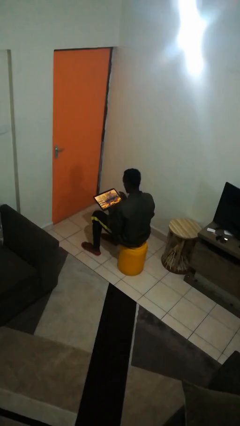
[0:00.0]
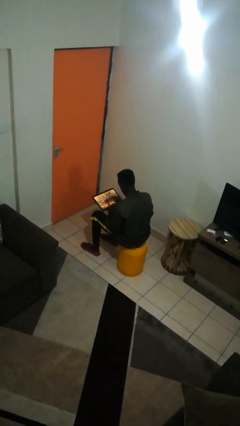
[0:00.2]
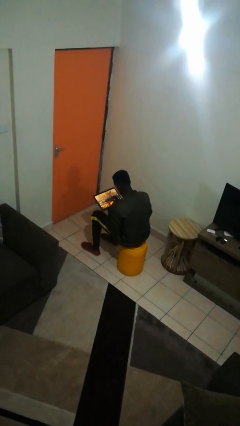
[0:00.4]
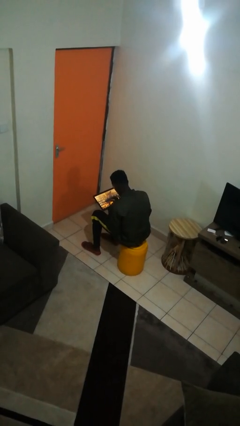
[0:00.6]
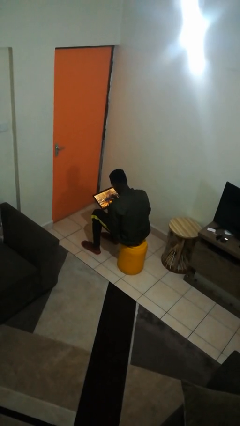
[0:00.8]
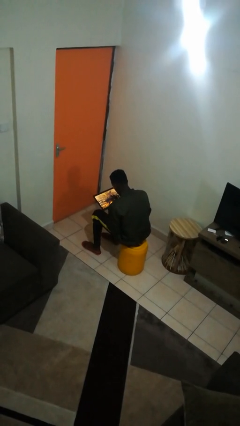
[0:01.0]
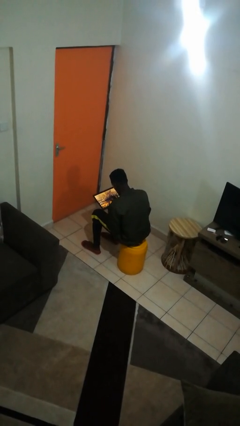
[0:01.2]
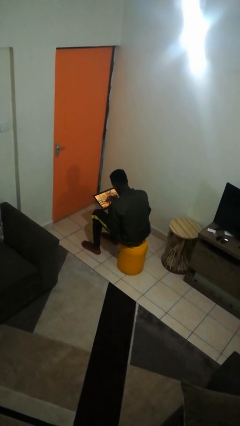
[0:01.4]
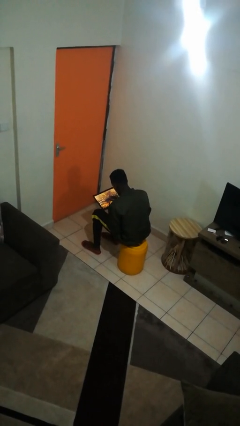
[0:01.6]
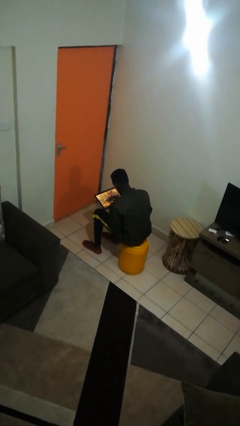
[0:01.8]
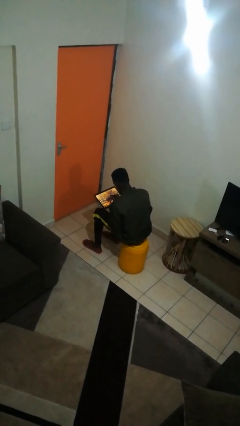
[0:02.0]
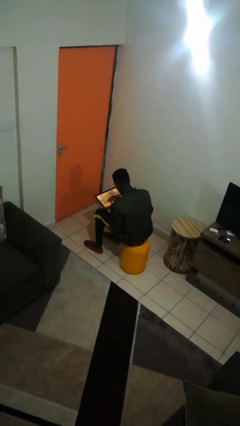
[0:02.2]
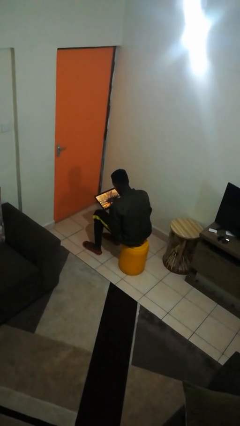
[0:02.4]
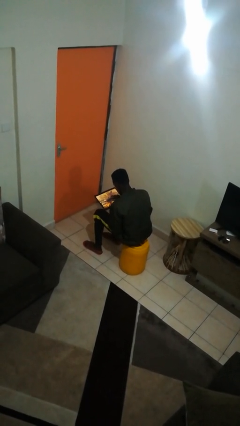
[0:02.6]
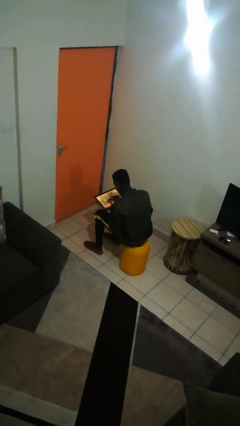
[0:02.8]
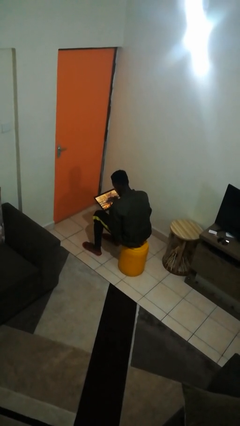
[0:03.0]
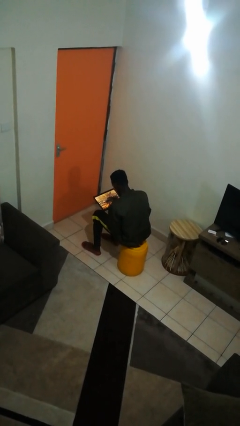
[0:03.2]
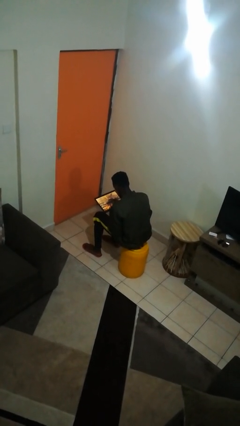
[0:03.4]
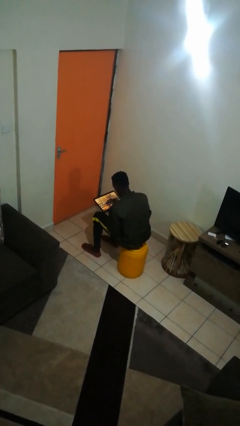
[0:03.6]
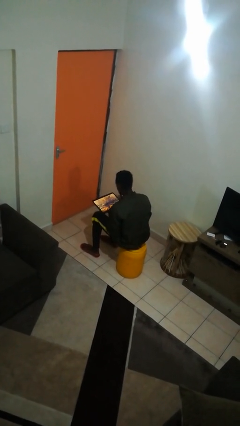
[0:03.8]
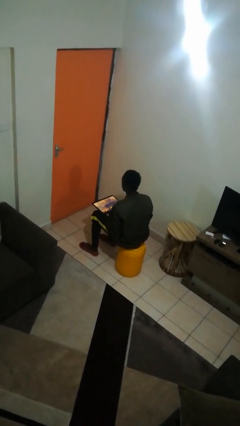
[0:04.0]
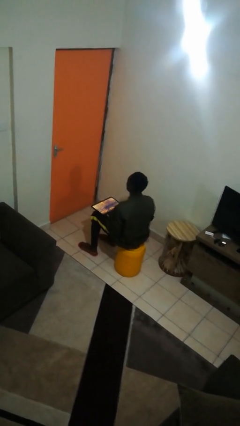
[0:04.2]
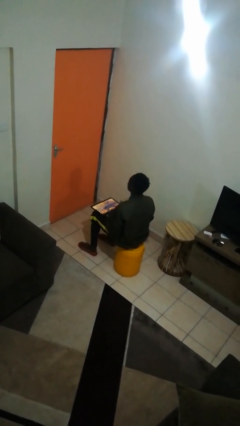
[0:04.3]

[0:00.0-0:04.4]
person interacts with tablet

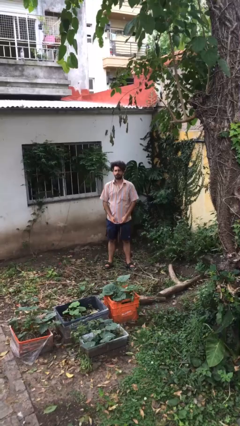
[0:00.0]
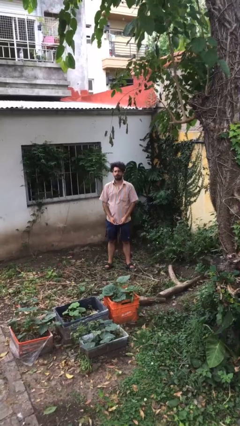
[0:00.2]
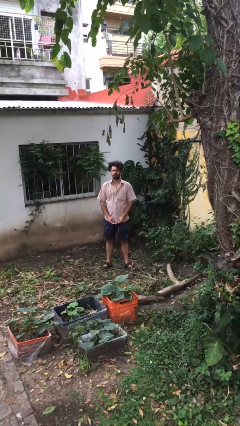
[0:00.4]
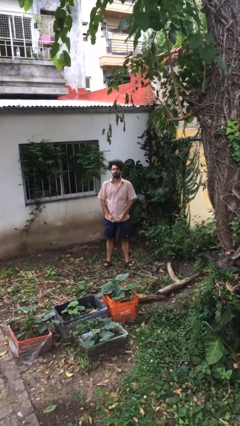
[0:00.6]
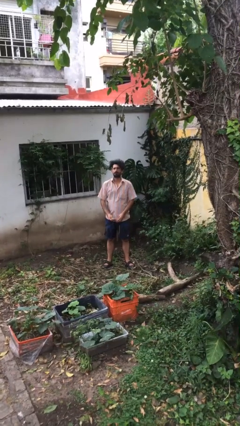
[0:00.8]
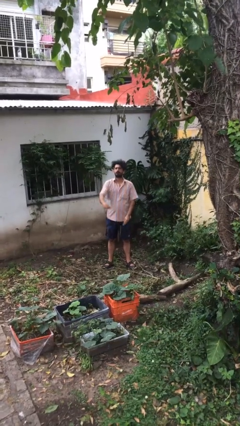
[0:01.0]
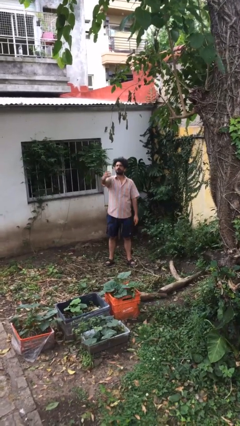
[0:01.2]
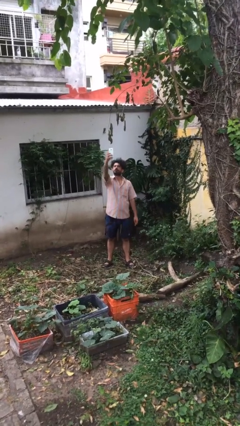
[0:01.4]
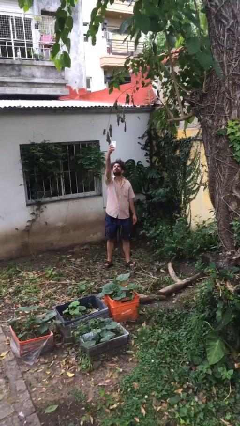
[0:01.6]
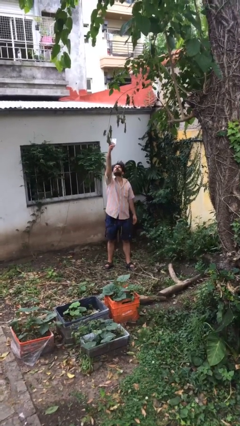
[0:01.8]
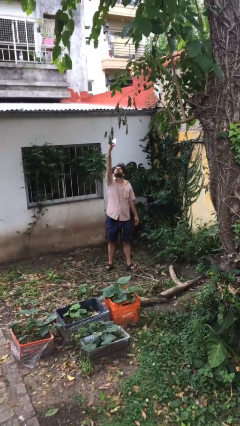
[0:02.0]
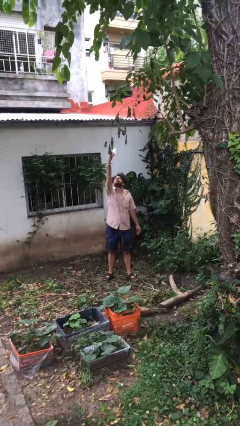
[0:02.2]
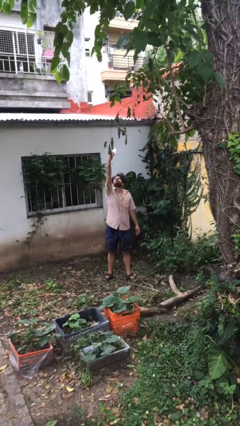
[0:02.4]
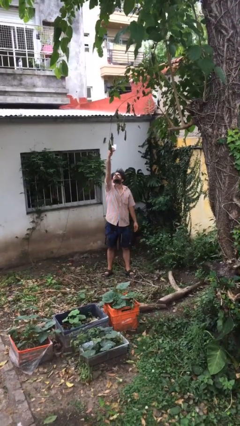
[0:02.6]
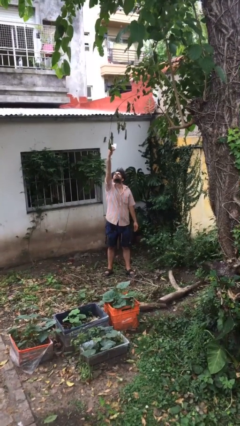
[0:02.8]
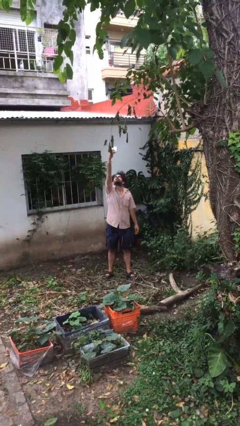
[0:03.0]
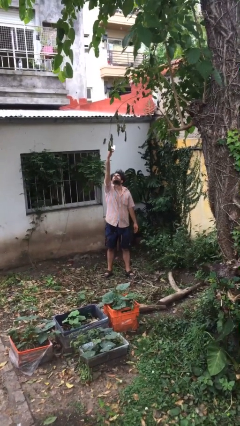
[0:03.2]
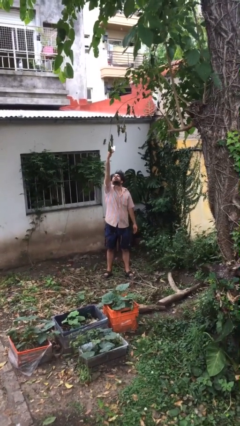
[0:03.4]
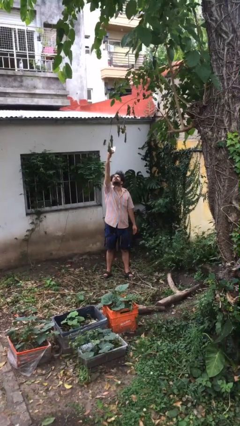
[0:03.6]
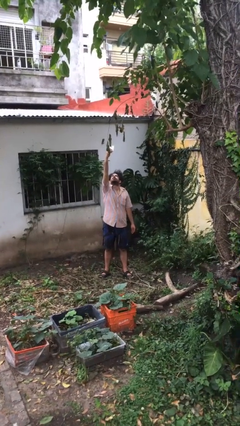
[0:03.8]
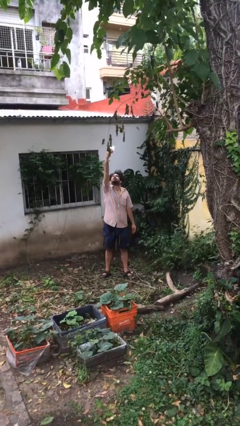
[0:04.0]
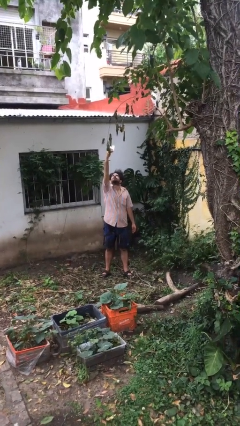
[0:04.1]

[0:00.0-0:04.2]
person takes selfie

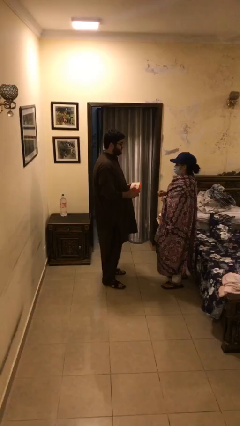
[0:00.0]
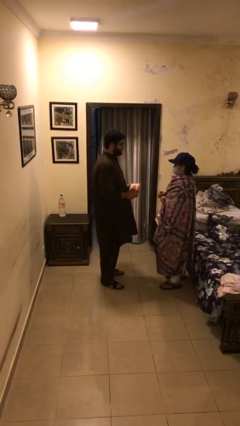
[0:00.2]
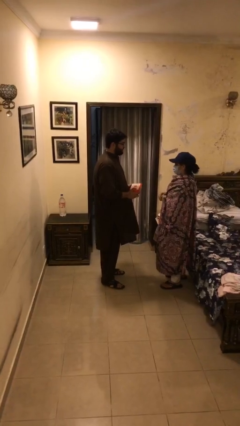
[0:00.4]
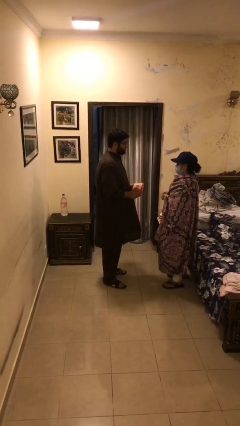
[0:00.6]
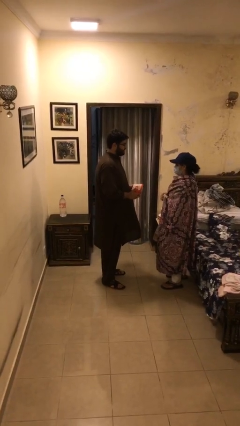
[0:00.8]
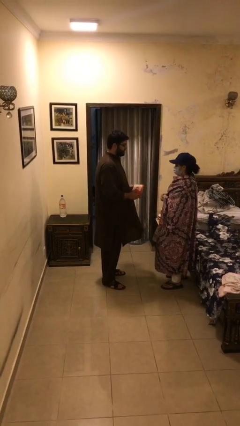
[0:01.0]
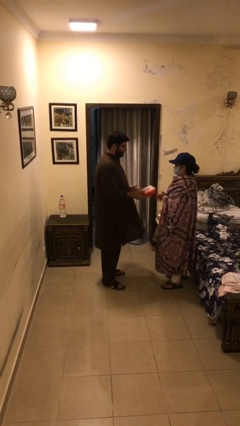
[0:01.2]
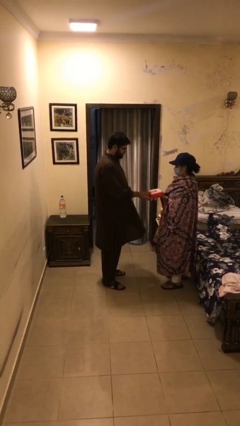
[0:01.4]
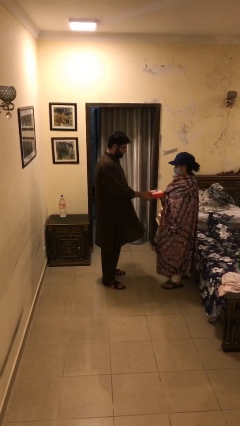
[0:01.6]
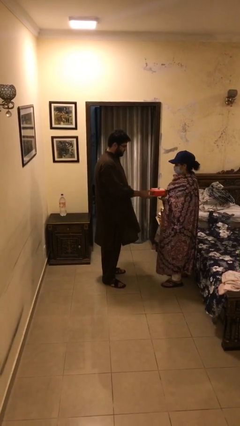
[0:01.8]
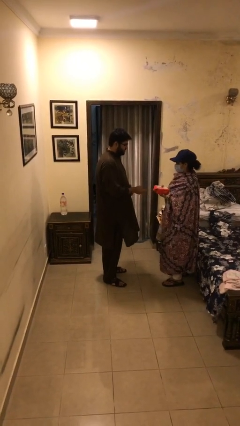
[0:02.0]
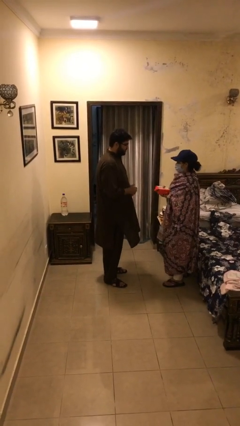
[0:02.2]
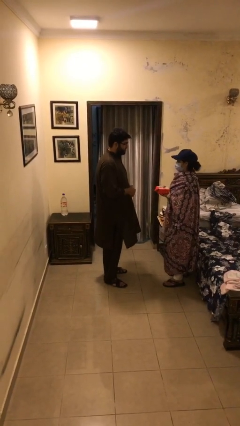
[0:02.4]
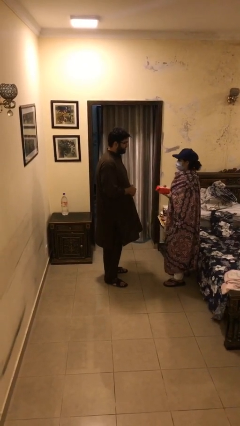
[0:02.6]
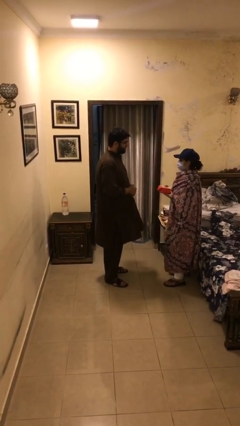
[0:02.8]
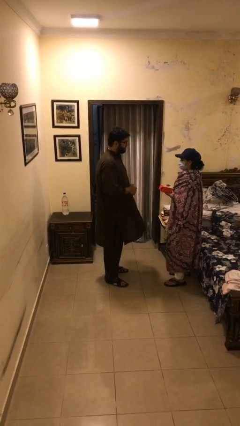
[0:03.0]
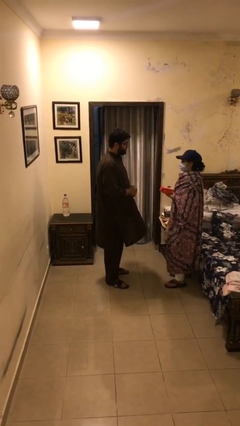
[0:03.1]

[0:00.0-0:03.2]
person transfers object to person

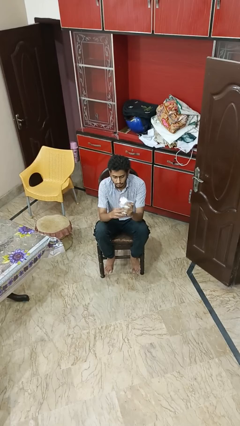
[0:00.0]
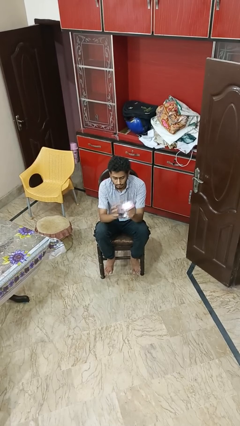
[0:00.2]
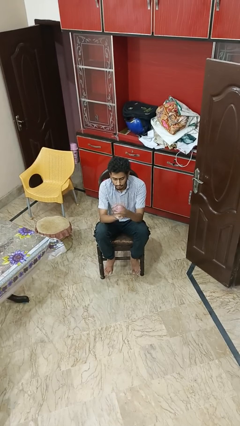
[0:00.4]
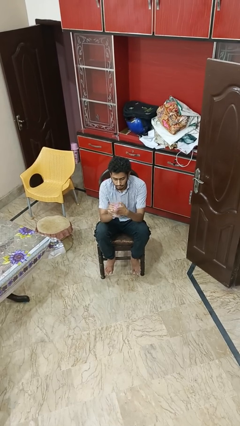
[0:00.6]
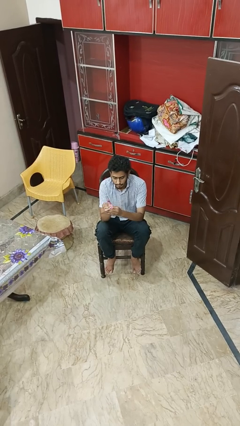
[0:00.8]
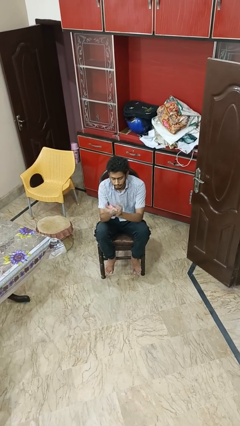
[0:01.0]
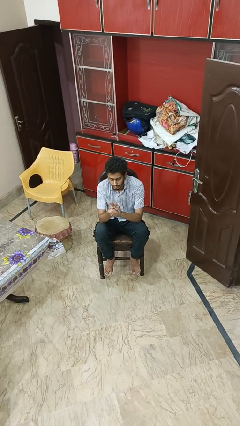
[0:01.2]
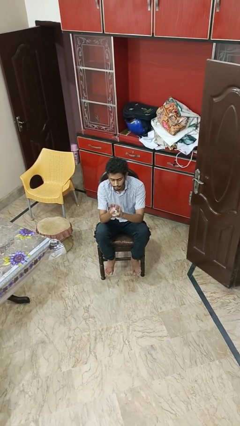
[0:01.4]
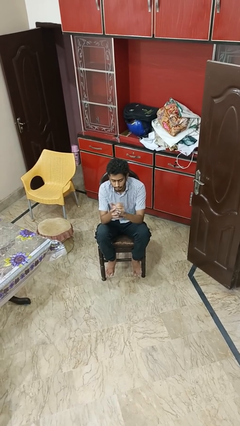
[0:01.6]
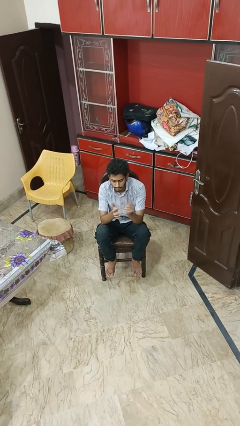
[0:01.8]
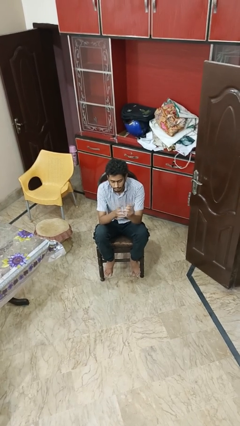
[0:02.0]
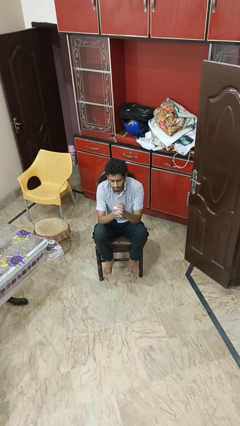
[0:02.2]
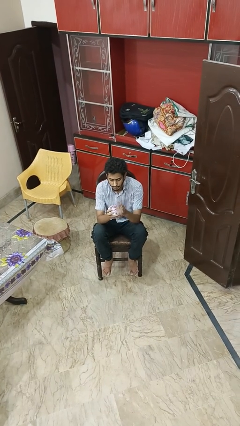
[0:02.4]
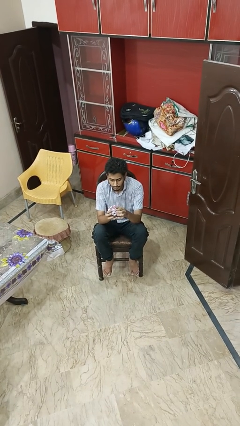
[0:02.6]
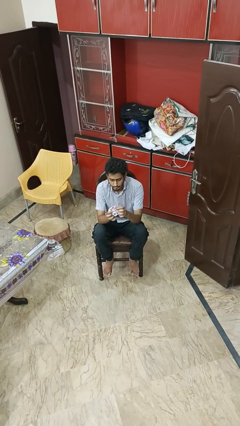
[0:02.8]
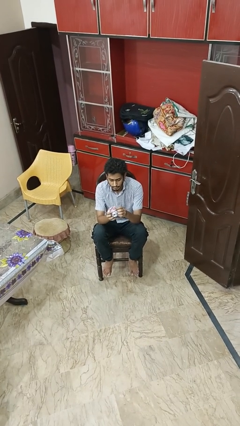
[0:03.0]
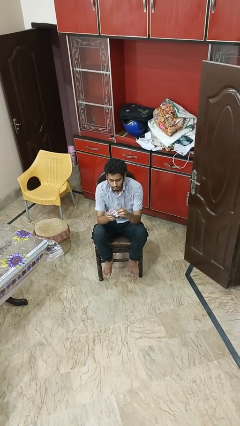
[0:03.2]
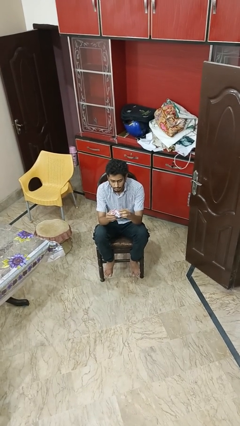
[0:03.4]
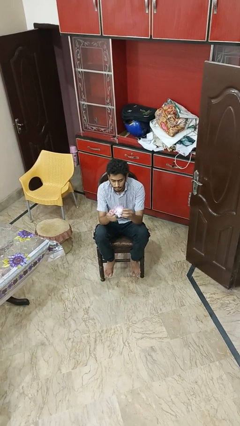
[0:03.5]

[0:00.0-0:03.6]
person crumples paper

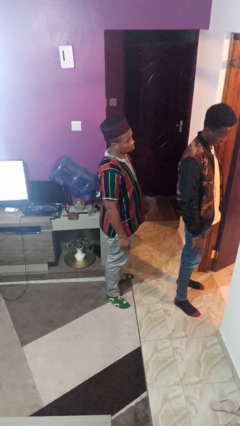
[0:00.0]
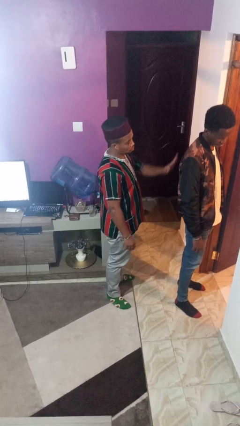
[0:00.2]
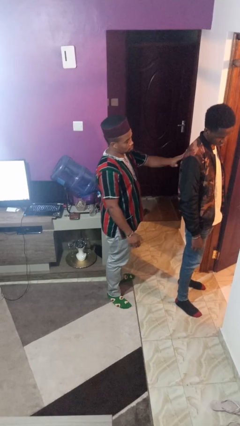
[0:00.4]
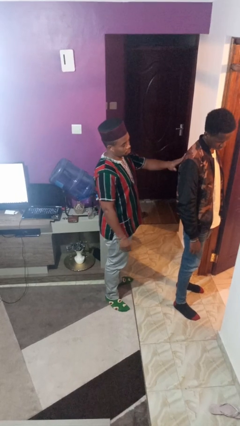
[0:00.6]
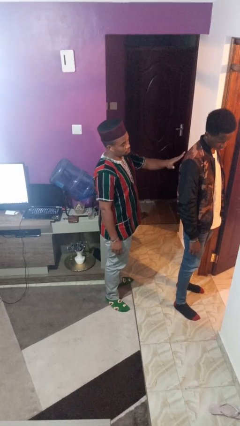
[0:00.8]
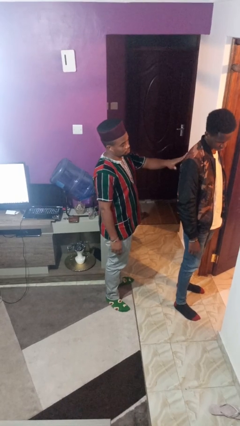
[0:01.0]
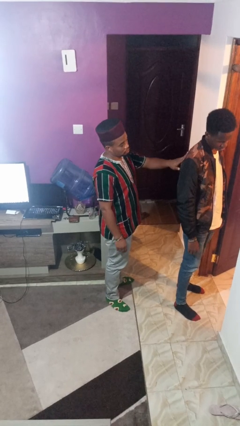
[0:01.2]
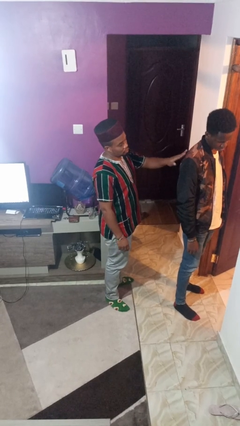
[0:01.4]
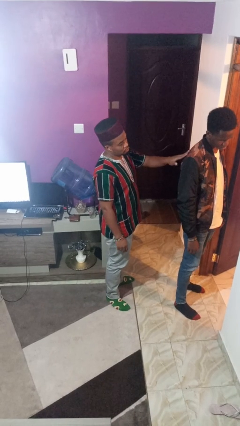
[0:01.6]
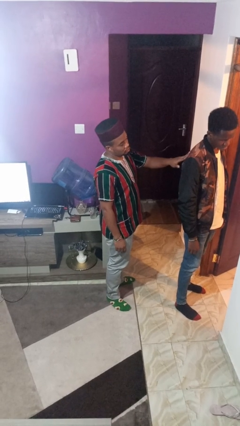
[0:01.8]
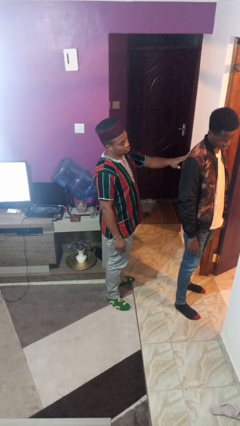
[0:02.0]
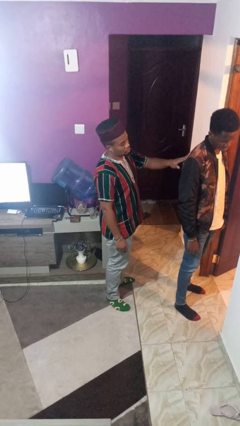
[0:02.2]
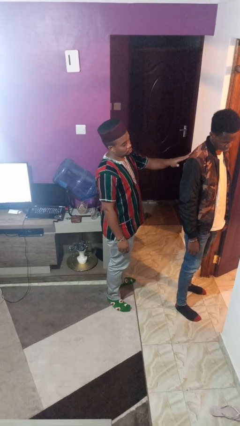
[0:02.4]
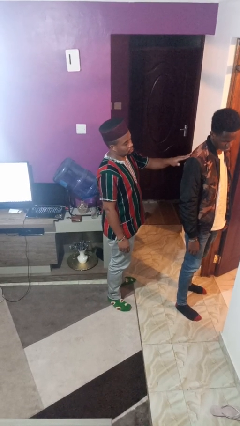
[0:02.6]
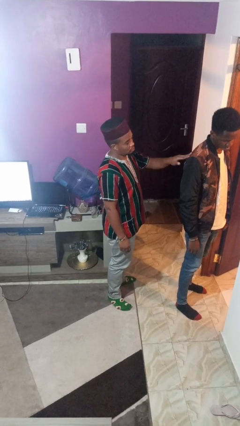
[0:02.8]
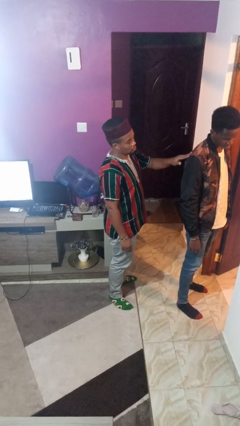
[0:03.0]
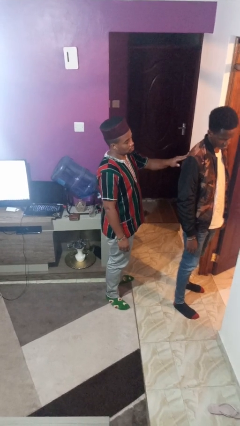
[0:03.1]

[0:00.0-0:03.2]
person touches back of person
